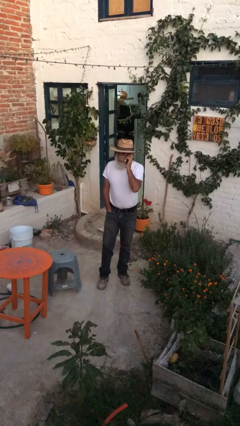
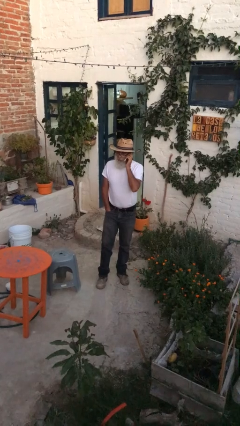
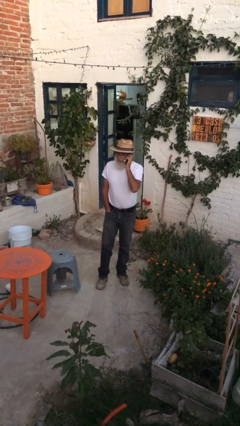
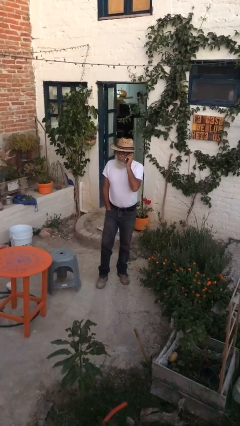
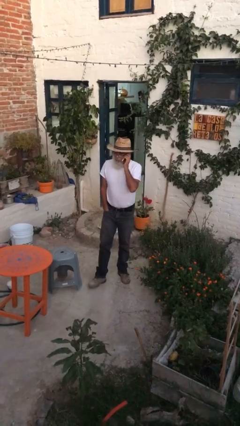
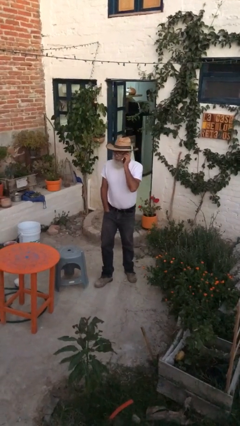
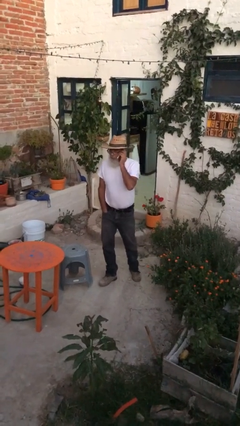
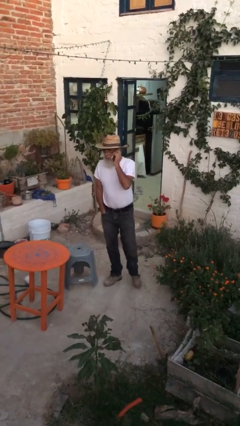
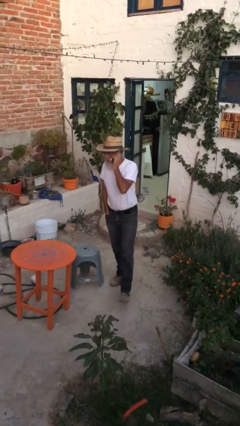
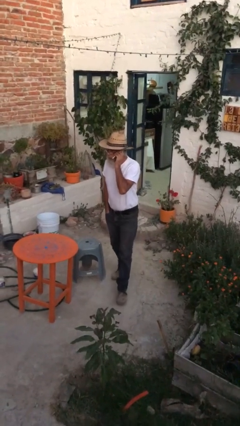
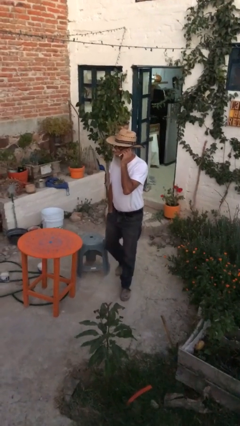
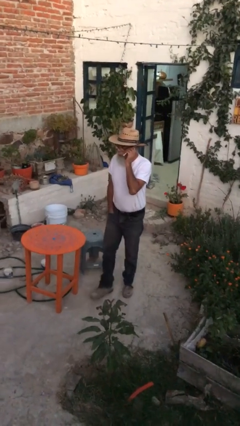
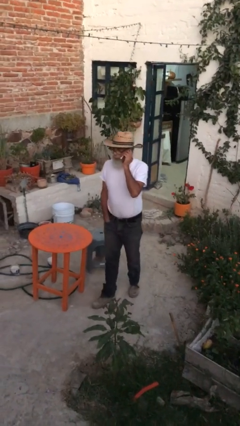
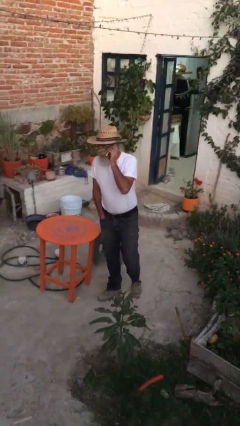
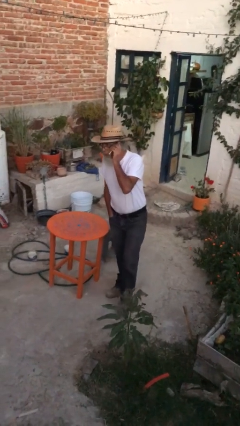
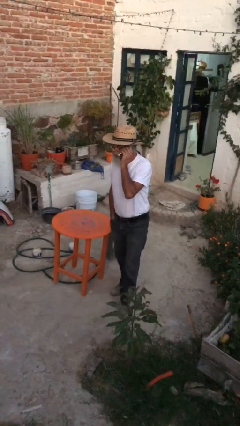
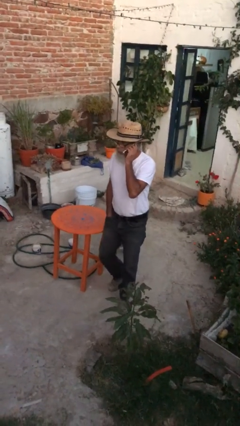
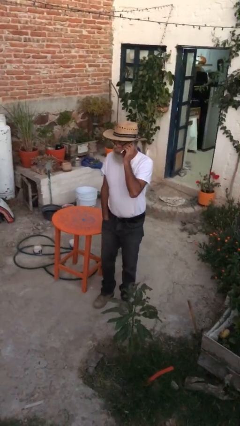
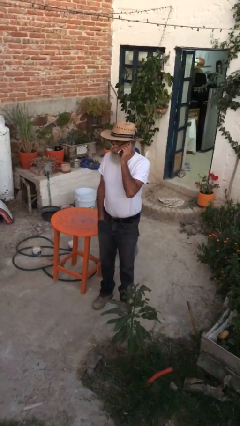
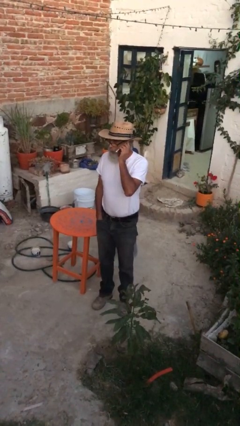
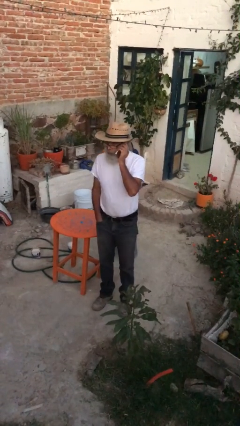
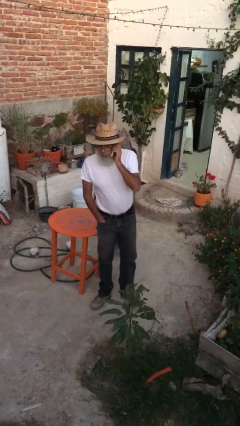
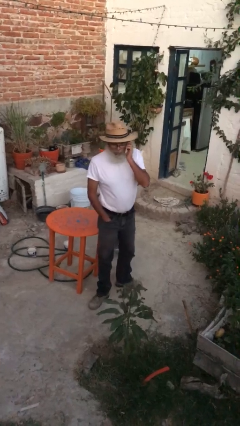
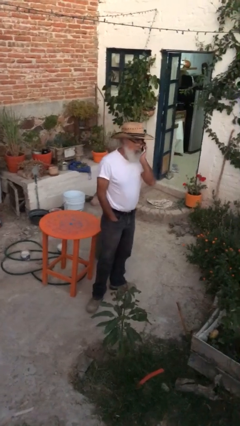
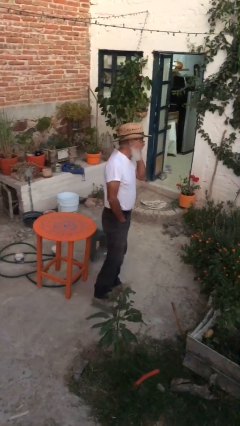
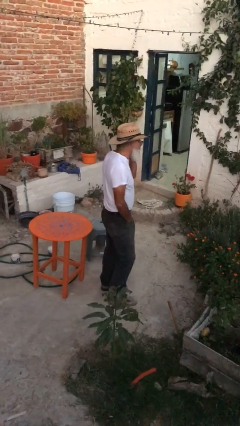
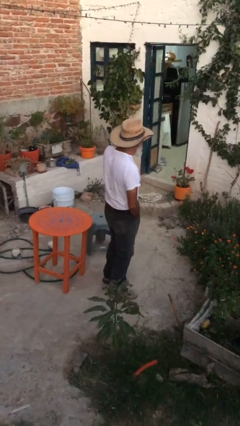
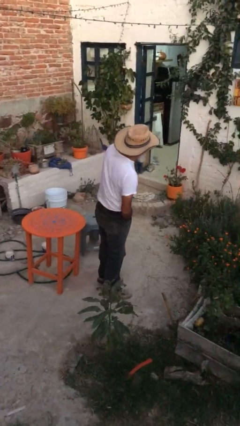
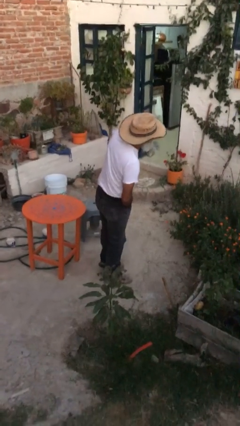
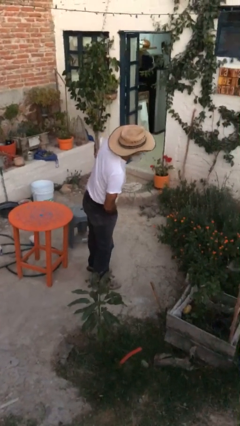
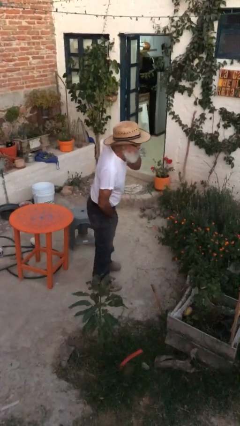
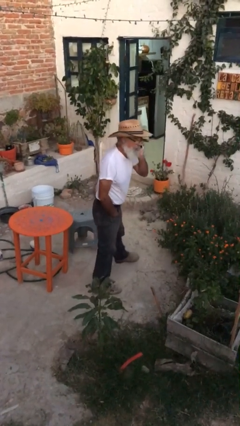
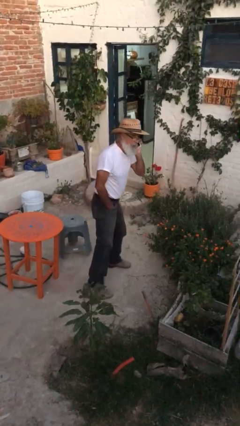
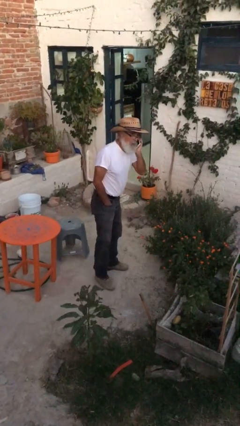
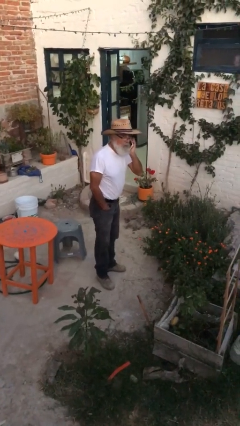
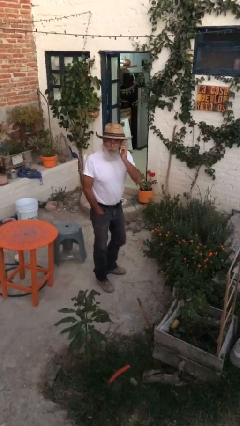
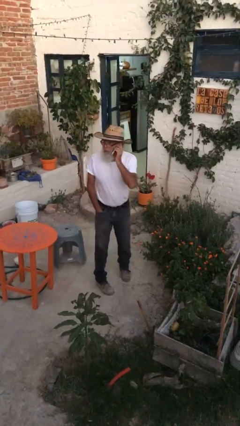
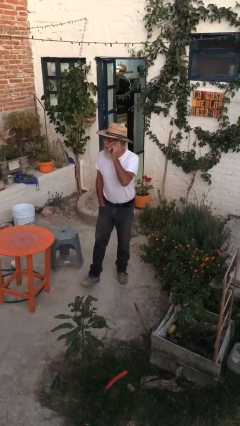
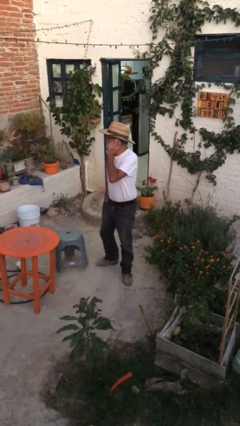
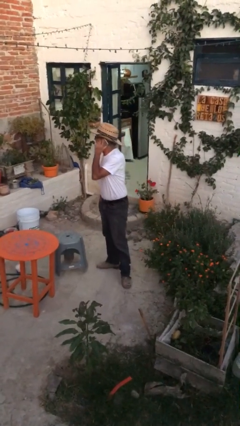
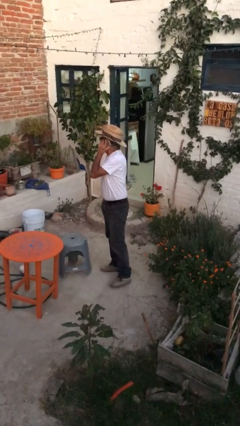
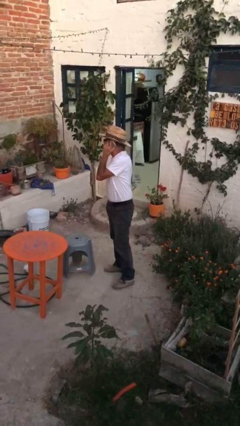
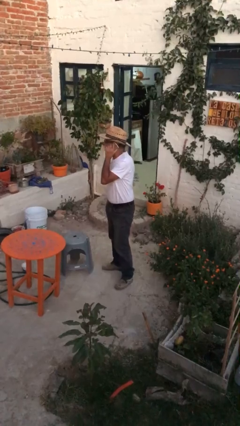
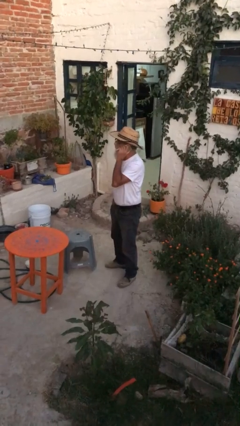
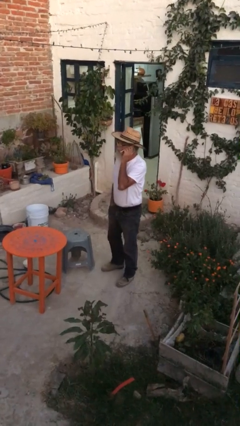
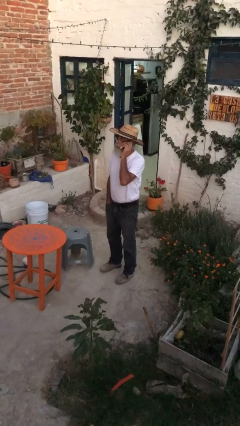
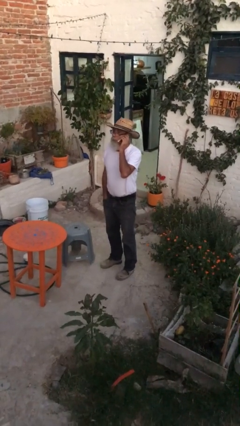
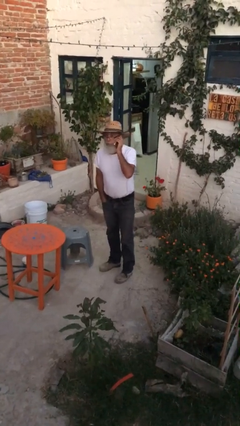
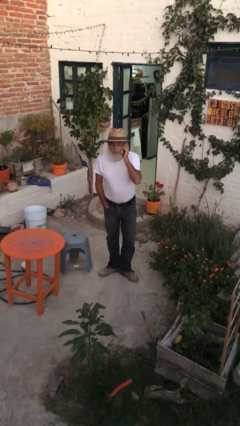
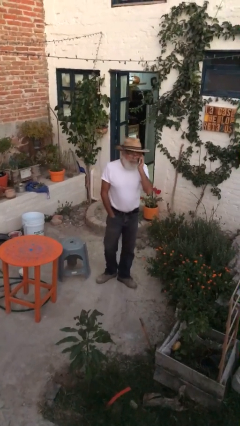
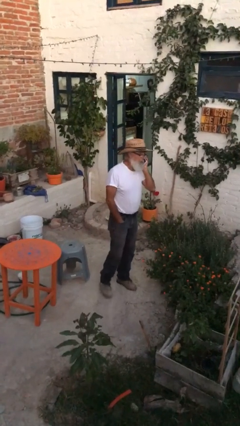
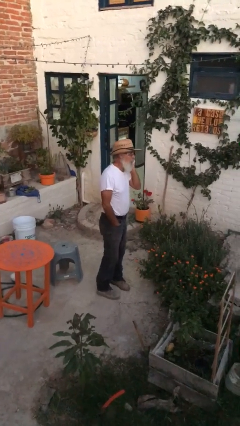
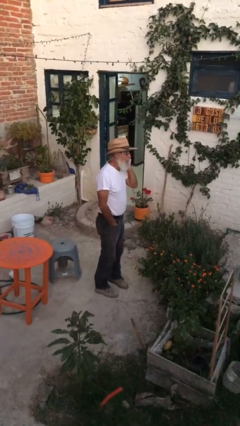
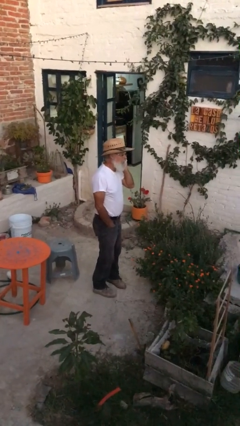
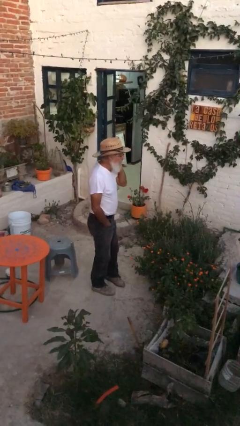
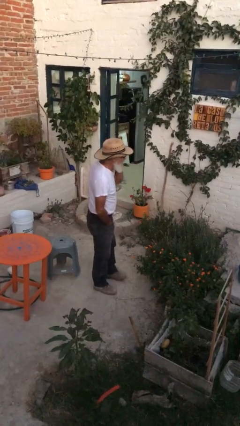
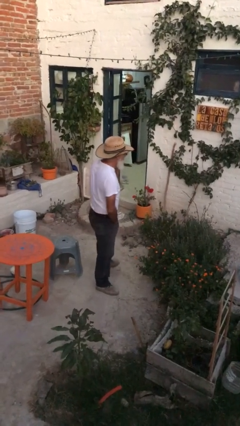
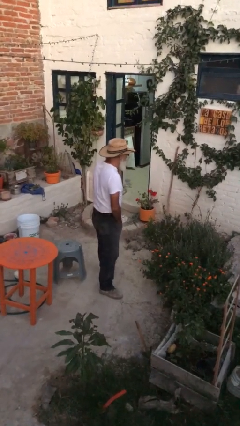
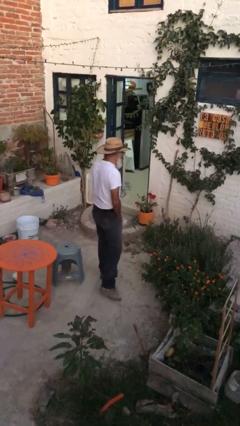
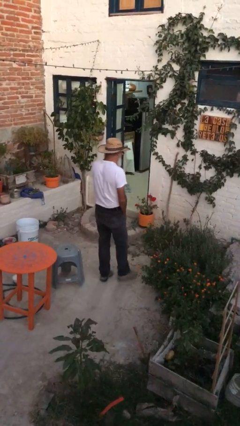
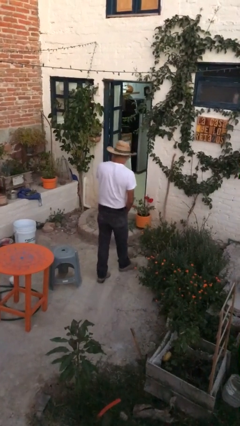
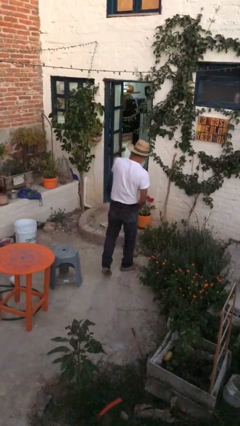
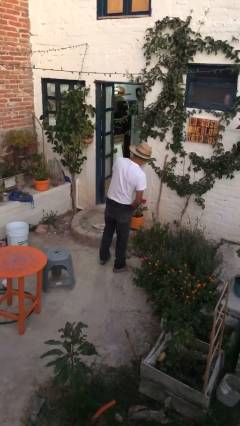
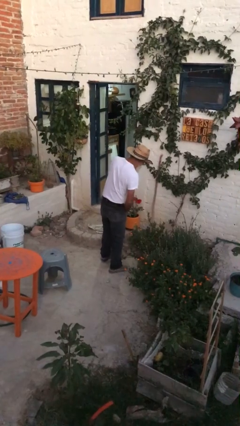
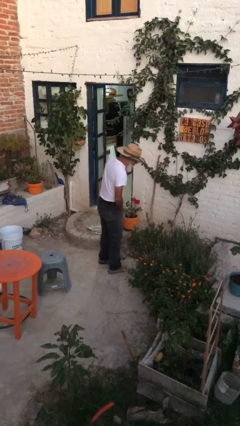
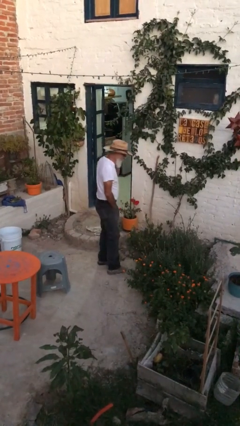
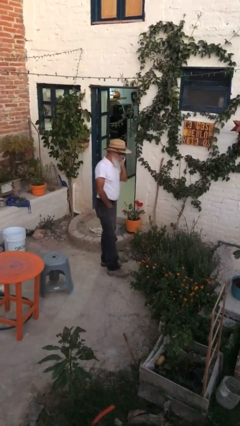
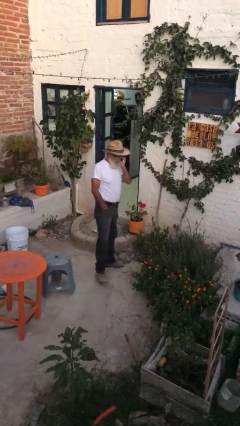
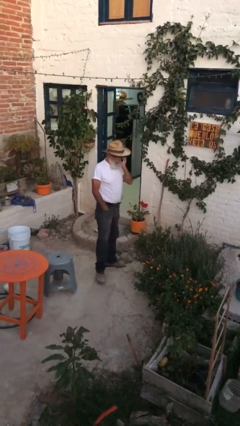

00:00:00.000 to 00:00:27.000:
person walks

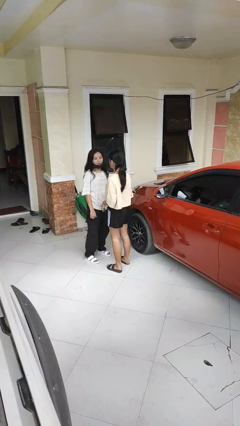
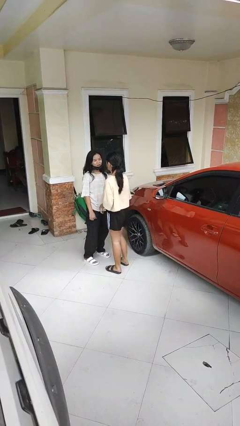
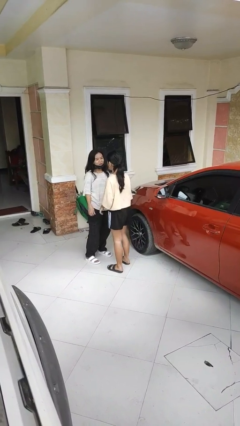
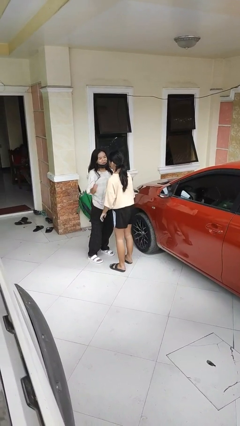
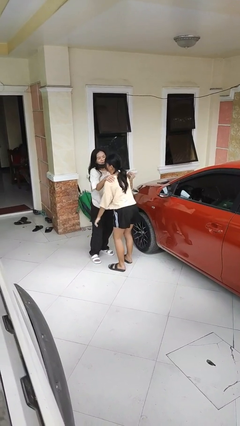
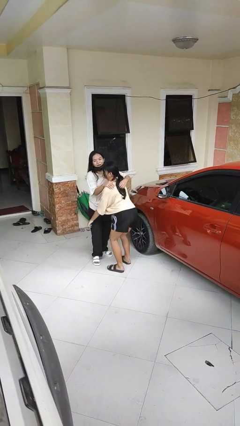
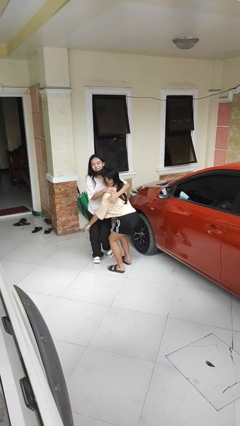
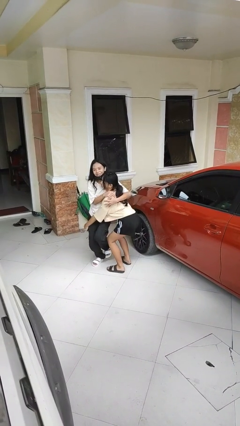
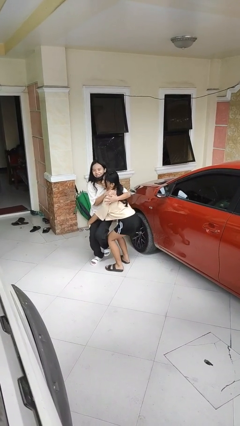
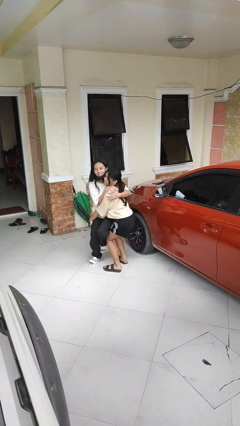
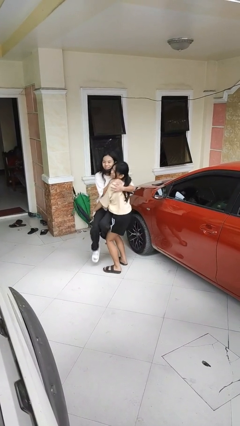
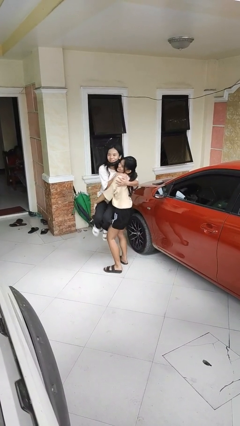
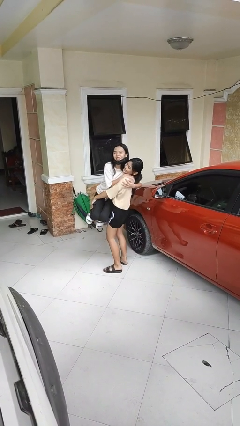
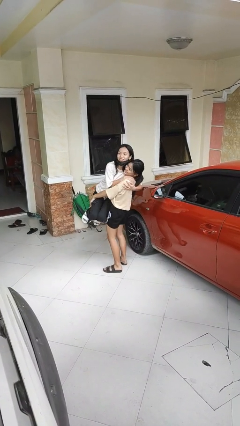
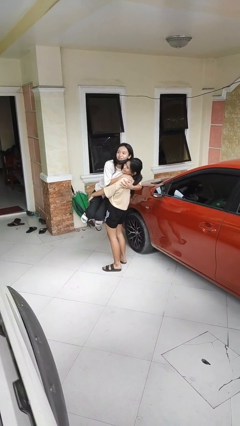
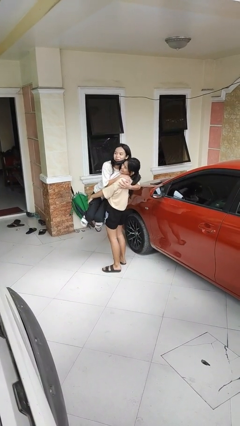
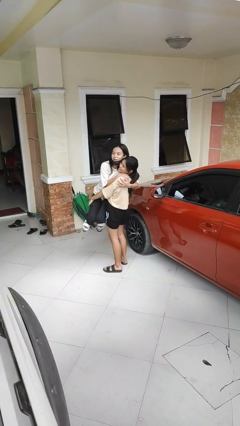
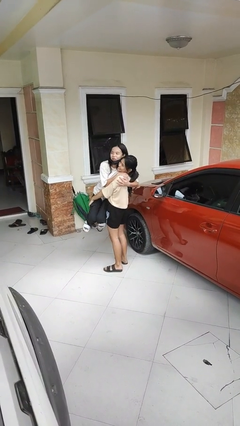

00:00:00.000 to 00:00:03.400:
person picks up person

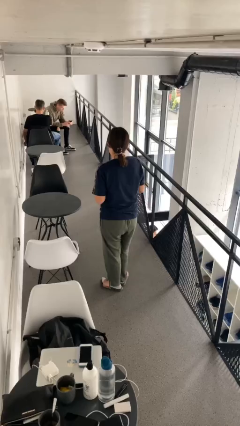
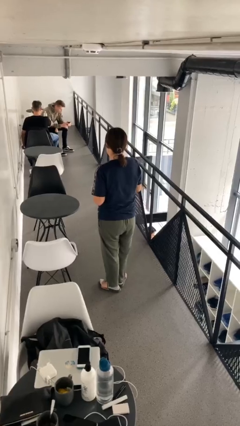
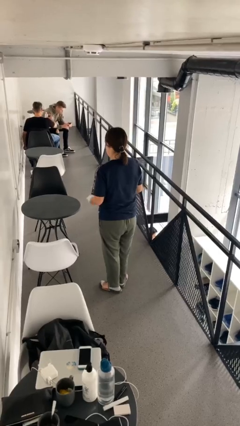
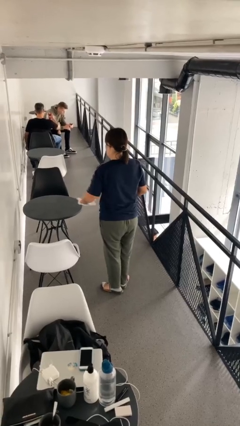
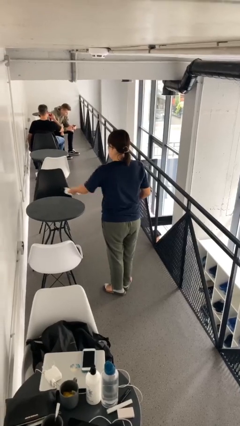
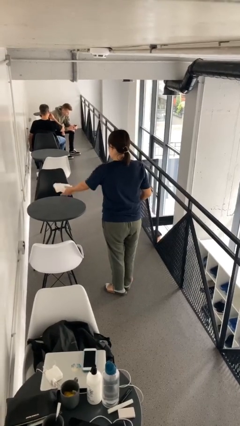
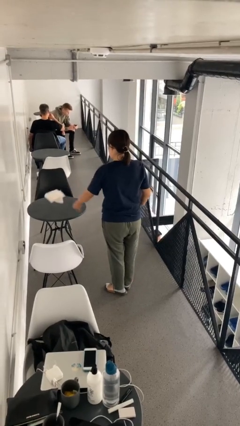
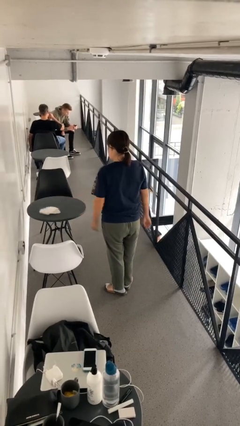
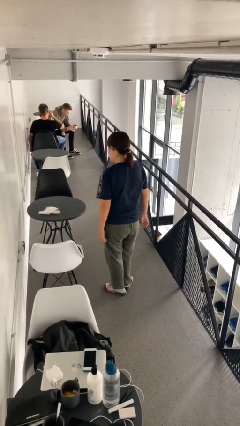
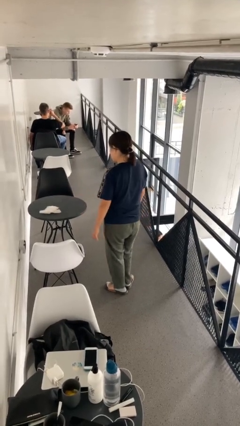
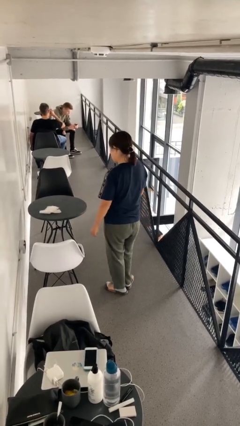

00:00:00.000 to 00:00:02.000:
person throws object on table
